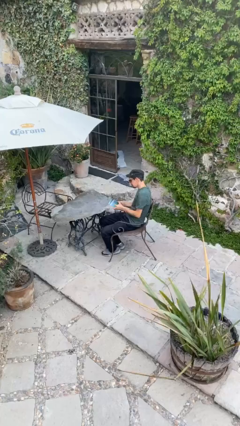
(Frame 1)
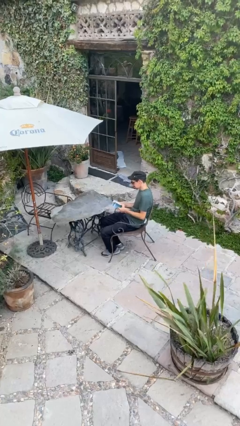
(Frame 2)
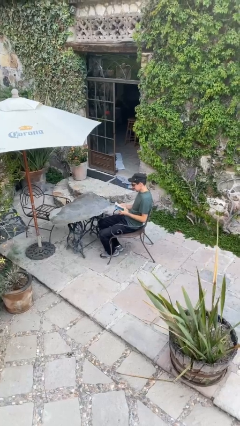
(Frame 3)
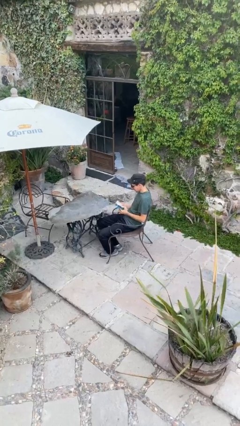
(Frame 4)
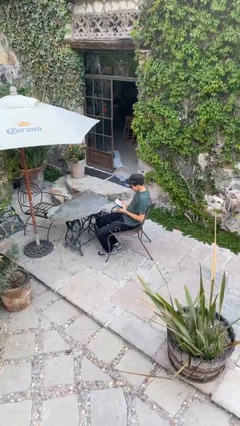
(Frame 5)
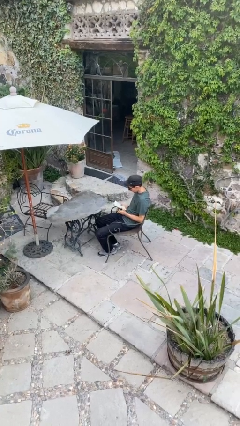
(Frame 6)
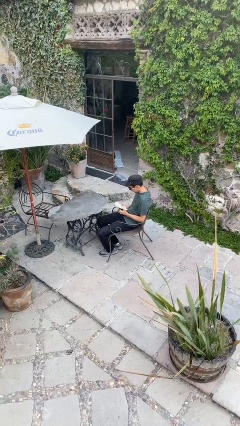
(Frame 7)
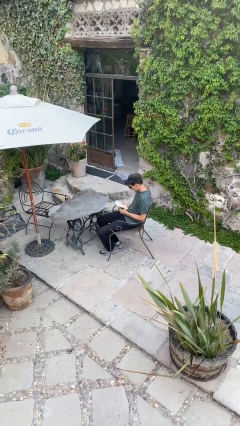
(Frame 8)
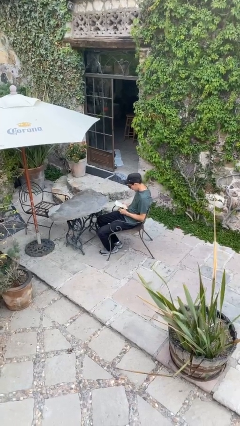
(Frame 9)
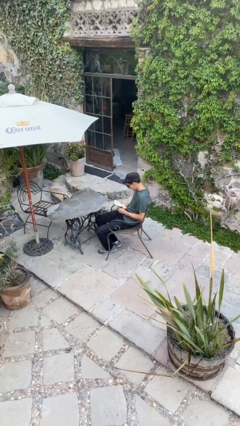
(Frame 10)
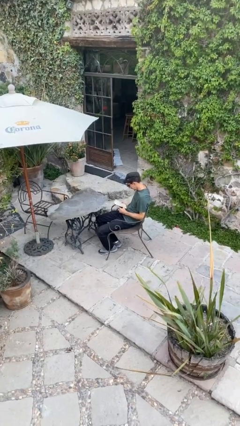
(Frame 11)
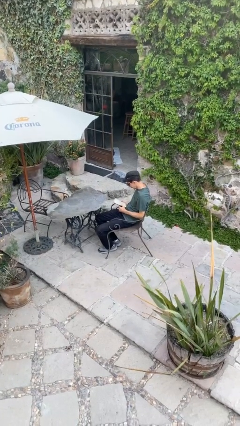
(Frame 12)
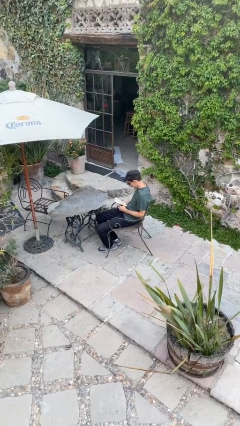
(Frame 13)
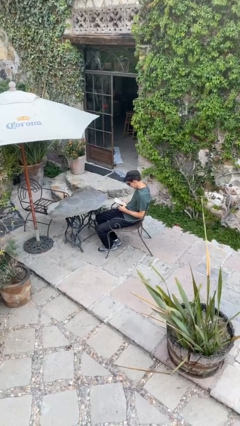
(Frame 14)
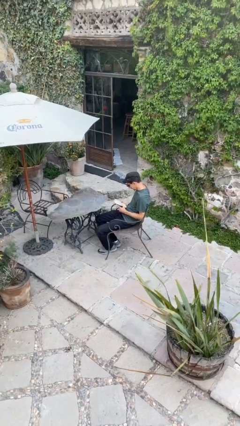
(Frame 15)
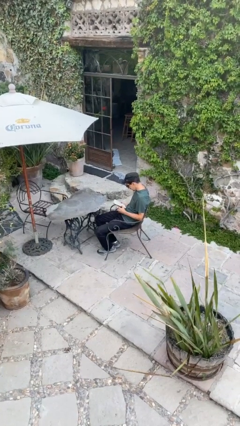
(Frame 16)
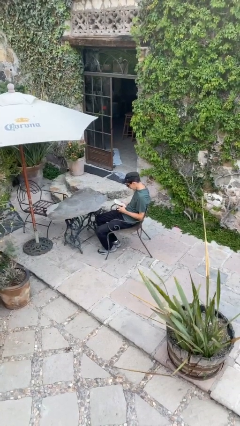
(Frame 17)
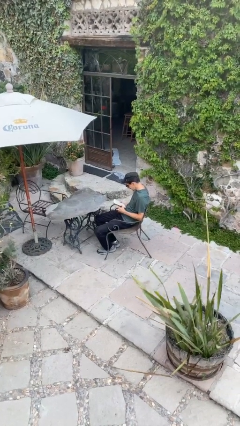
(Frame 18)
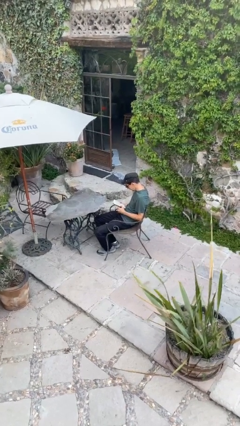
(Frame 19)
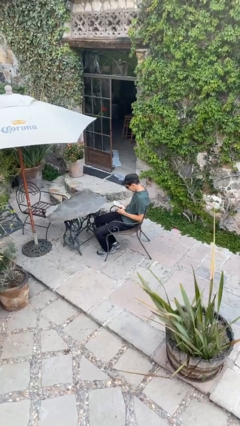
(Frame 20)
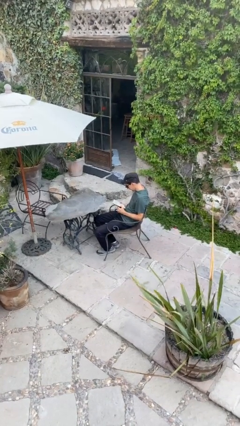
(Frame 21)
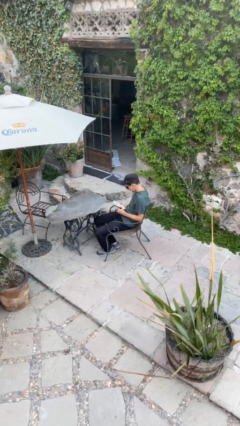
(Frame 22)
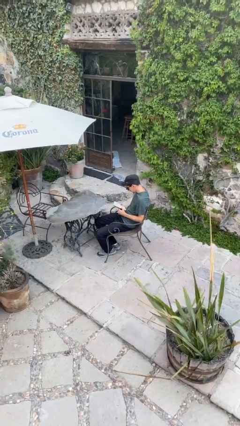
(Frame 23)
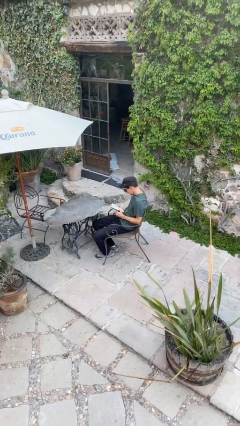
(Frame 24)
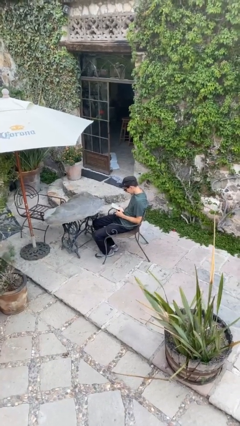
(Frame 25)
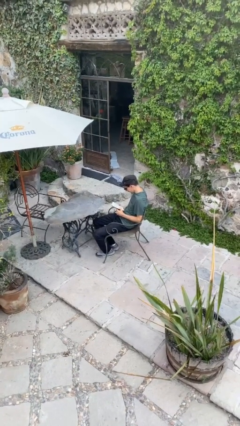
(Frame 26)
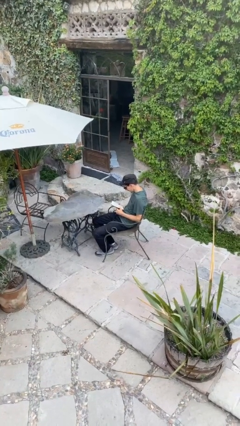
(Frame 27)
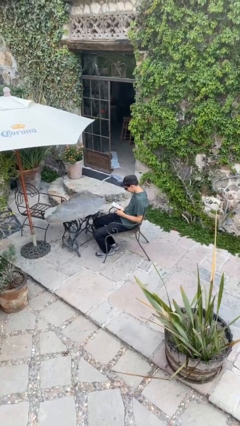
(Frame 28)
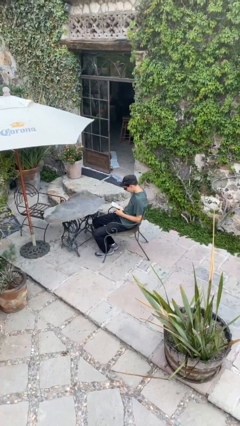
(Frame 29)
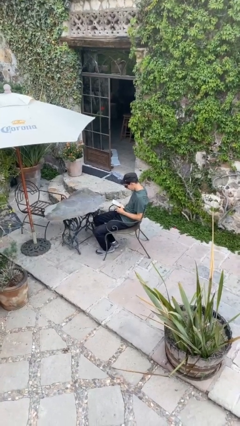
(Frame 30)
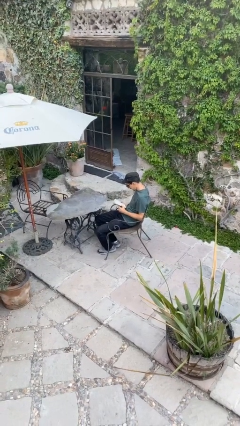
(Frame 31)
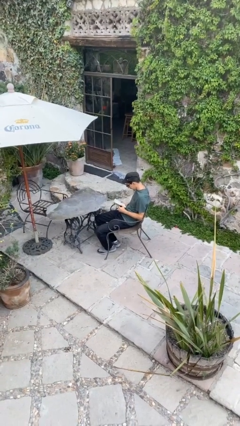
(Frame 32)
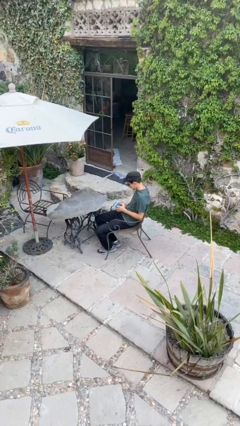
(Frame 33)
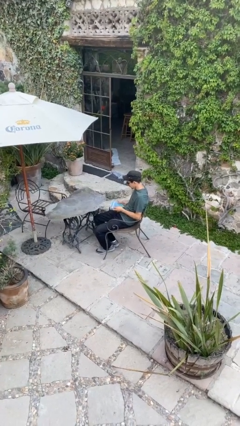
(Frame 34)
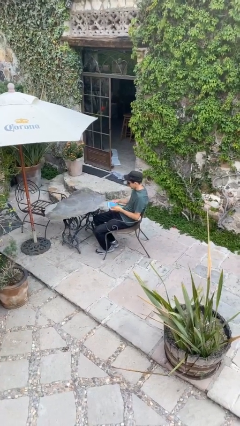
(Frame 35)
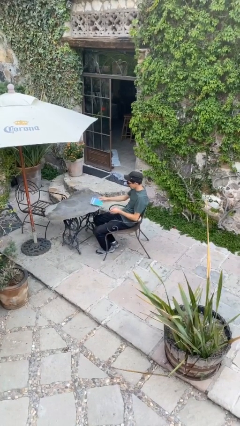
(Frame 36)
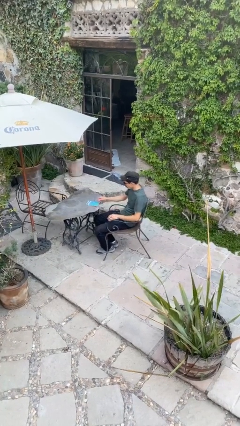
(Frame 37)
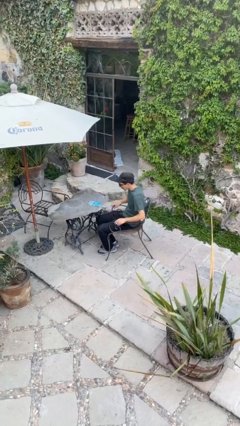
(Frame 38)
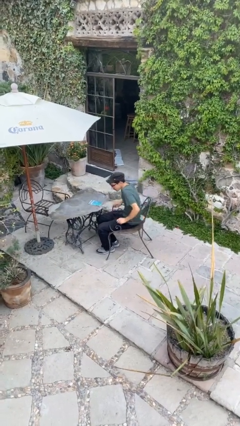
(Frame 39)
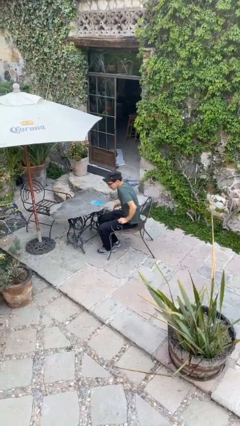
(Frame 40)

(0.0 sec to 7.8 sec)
person reads document

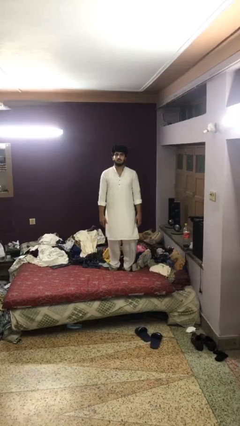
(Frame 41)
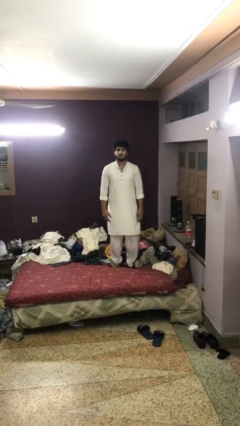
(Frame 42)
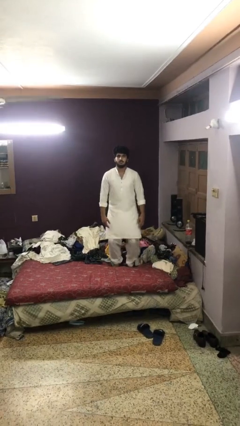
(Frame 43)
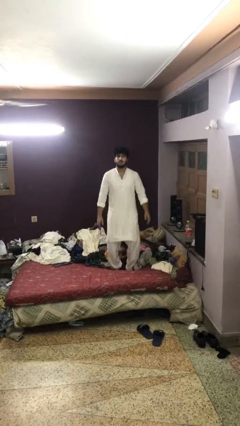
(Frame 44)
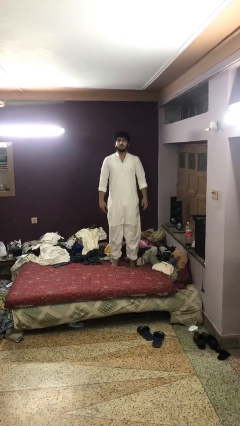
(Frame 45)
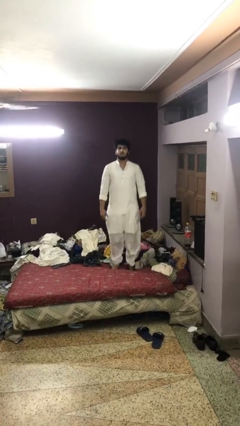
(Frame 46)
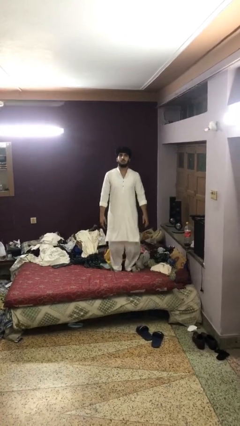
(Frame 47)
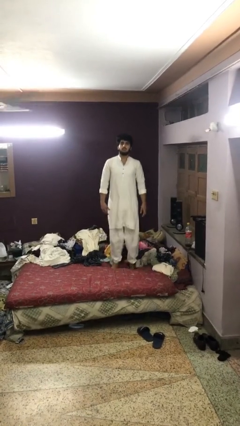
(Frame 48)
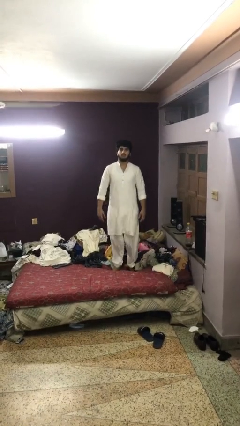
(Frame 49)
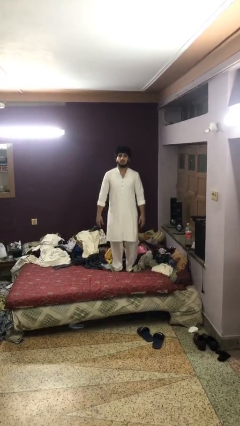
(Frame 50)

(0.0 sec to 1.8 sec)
person jumps on bed

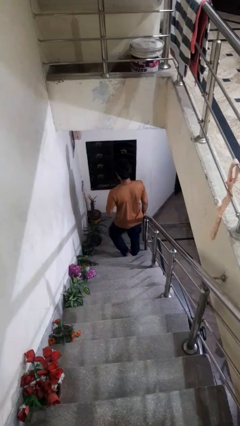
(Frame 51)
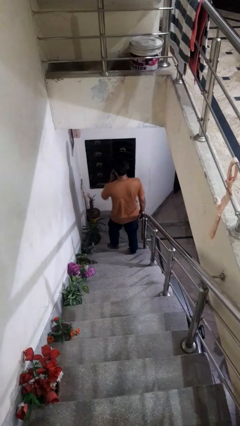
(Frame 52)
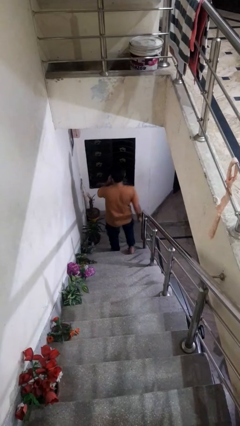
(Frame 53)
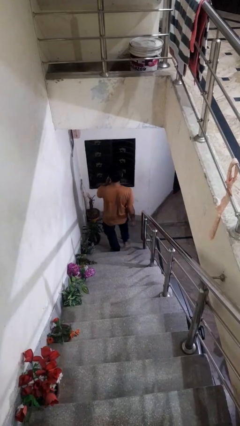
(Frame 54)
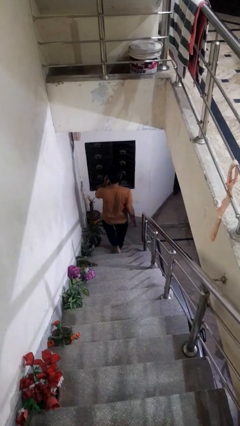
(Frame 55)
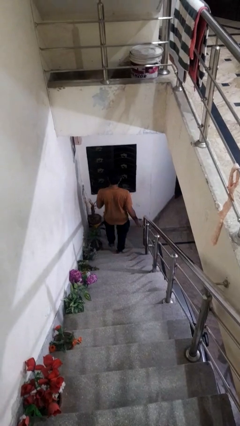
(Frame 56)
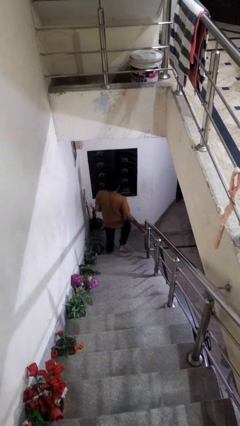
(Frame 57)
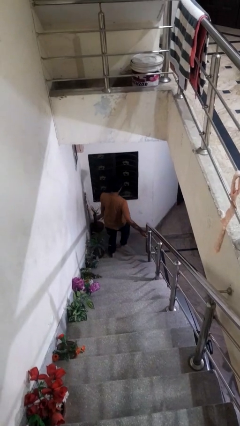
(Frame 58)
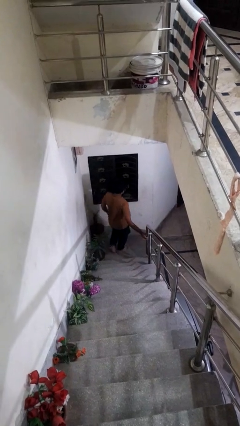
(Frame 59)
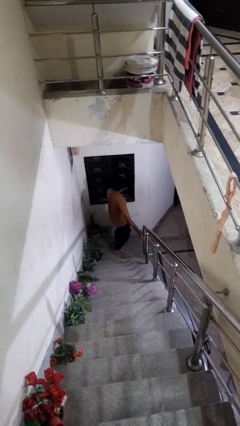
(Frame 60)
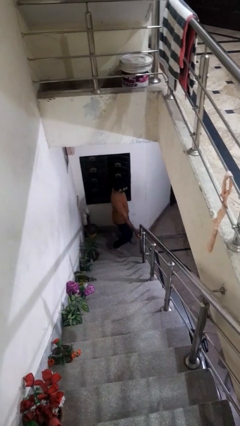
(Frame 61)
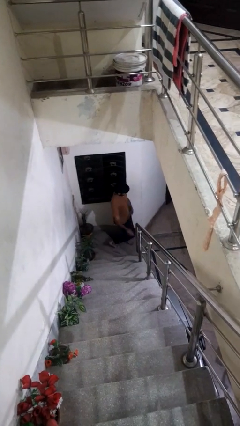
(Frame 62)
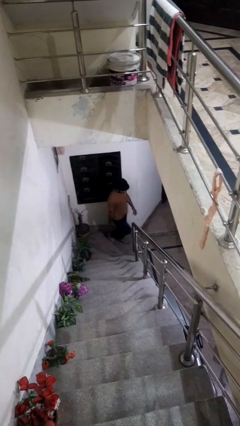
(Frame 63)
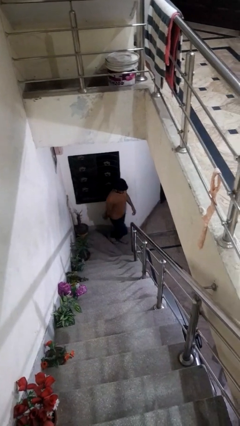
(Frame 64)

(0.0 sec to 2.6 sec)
person climbs down stairs

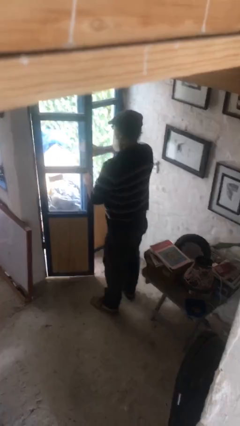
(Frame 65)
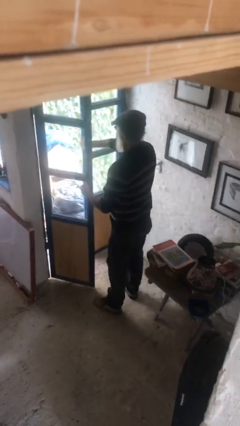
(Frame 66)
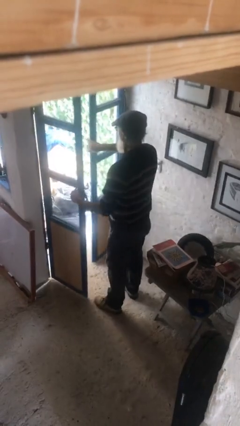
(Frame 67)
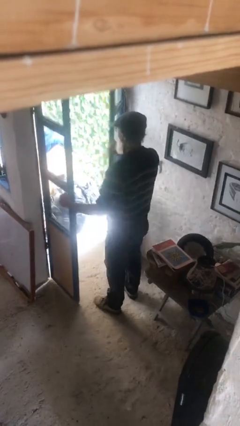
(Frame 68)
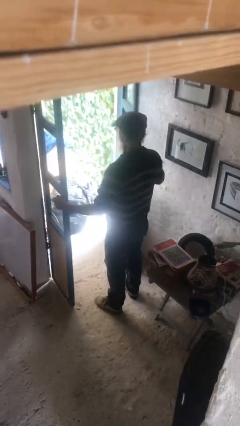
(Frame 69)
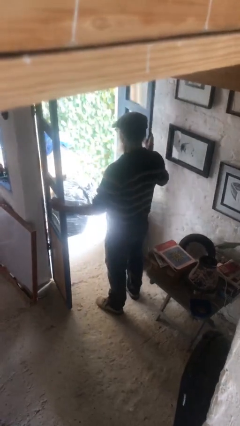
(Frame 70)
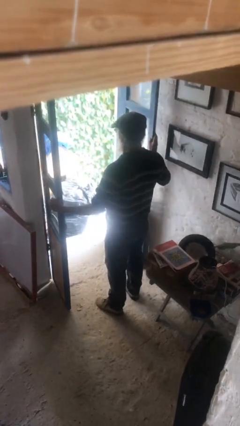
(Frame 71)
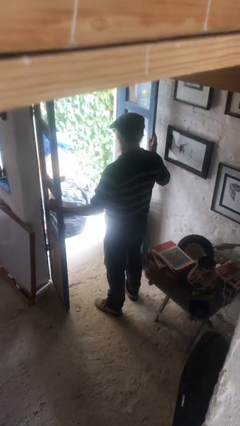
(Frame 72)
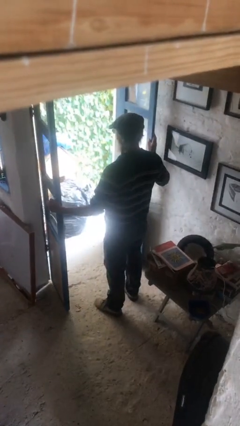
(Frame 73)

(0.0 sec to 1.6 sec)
person opens facility door

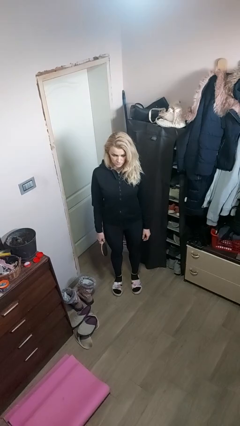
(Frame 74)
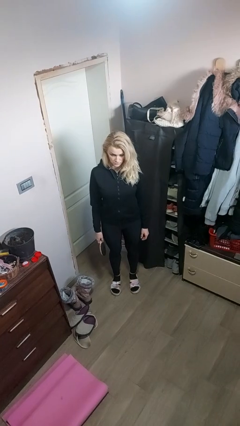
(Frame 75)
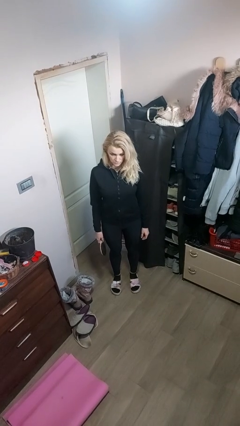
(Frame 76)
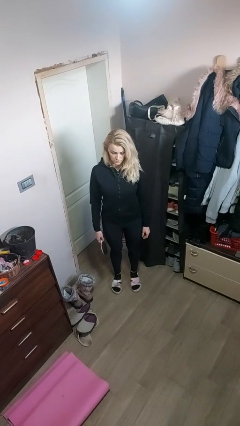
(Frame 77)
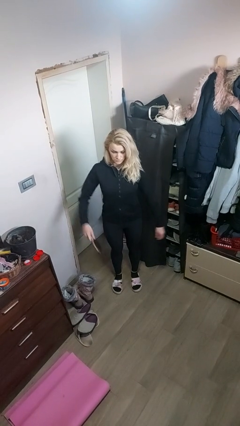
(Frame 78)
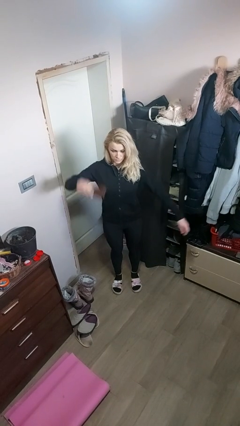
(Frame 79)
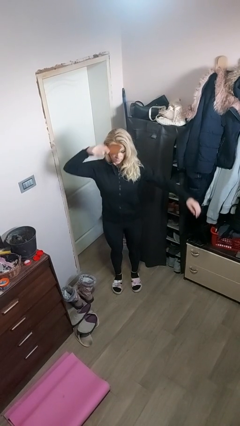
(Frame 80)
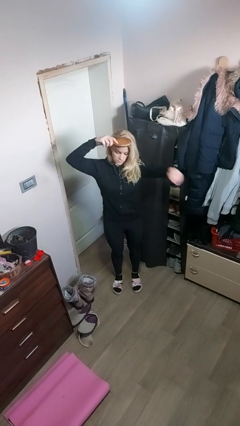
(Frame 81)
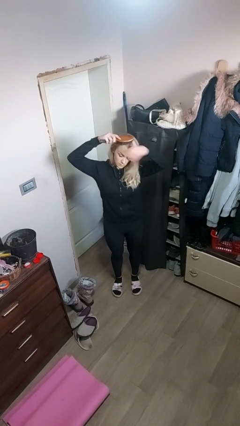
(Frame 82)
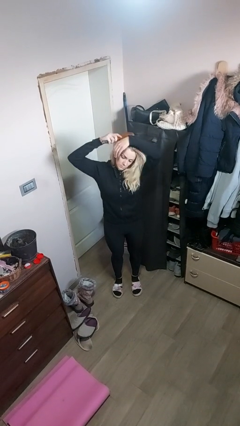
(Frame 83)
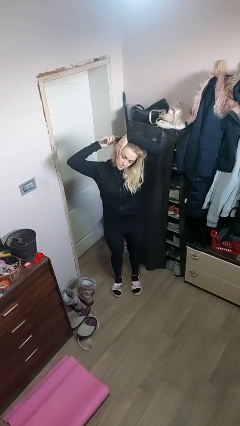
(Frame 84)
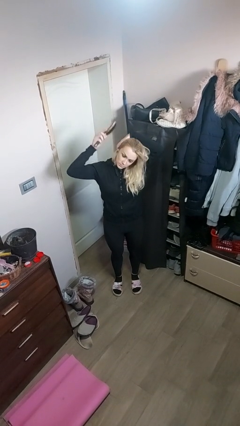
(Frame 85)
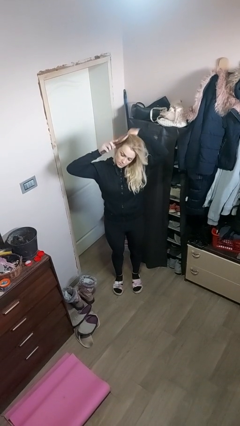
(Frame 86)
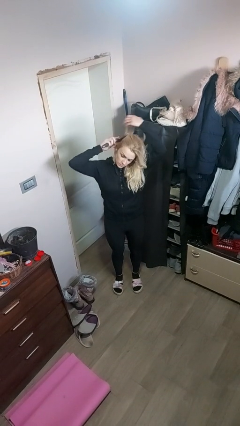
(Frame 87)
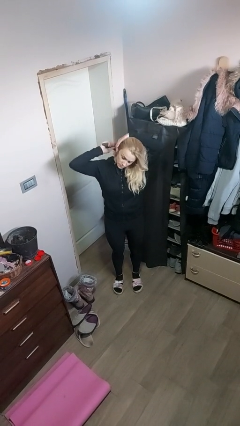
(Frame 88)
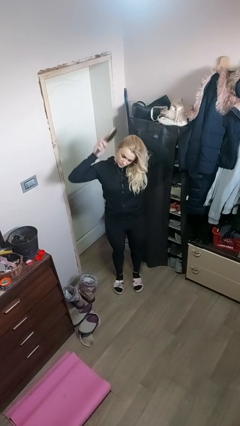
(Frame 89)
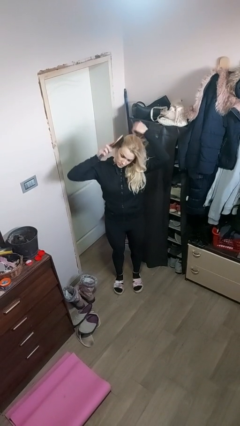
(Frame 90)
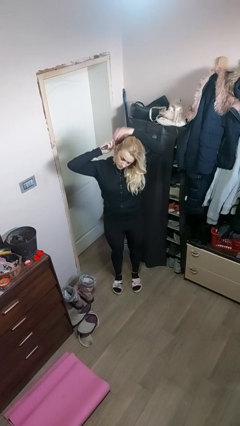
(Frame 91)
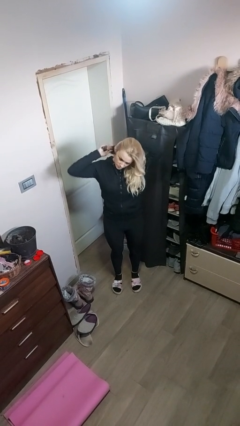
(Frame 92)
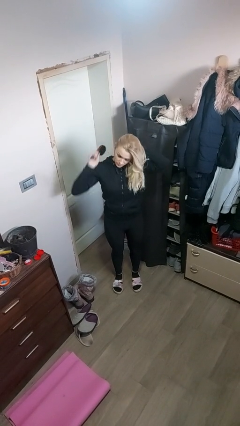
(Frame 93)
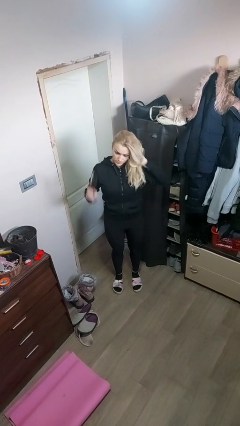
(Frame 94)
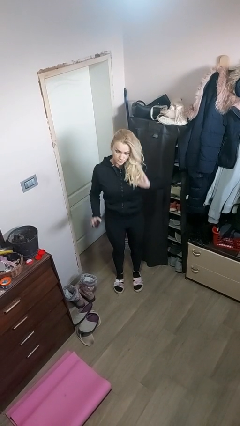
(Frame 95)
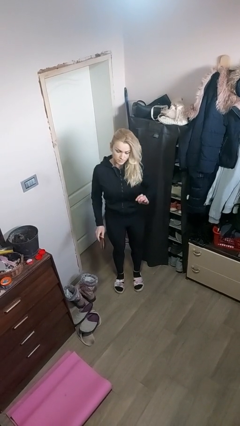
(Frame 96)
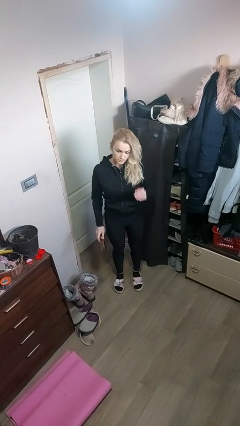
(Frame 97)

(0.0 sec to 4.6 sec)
person brushes hair
